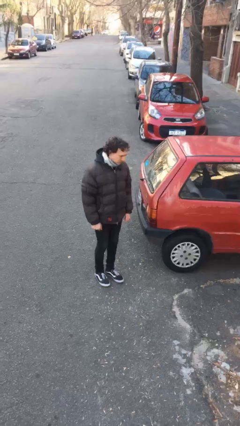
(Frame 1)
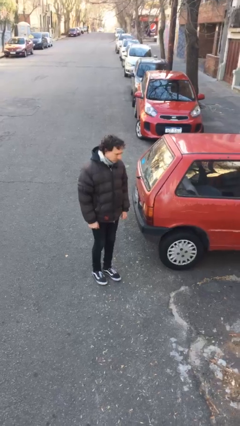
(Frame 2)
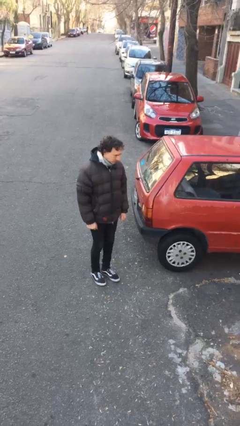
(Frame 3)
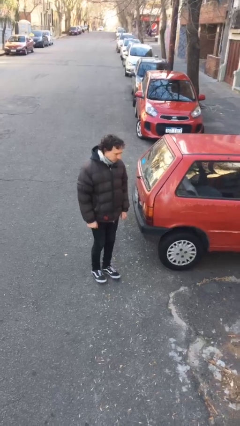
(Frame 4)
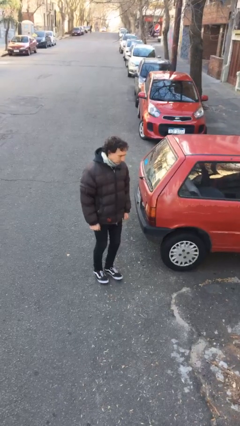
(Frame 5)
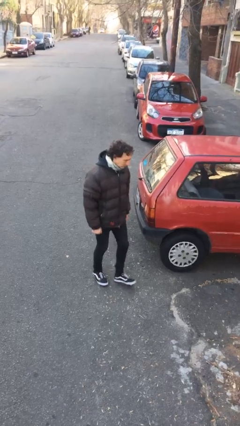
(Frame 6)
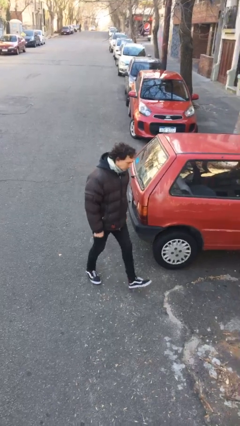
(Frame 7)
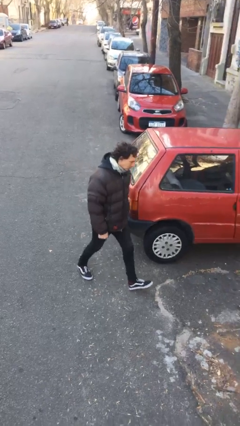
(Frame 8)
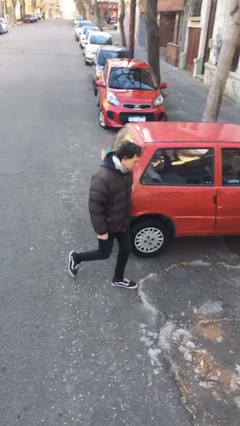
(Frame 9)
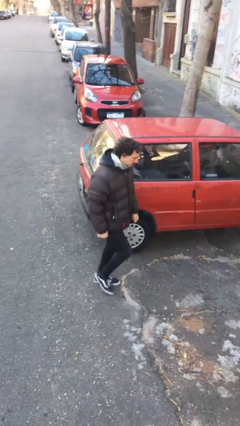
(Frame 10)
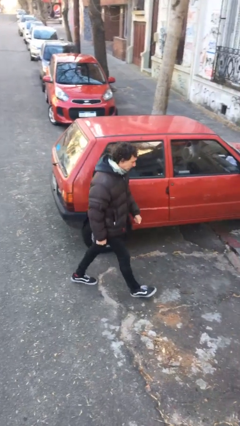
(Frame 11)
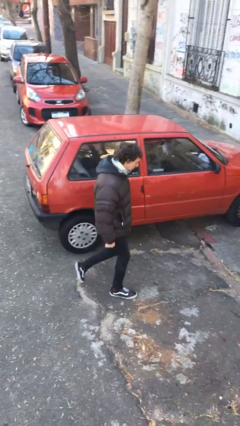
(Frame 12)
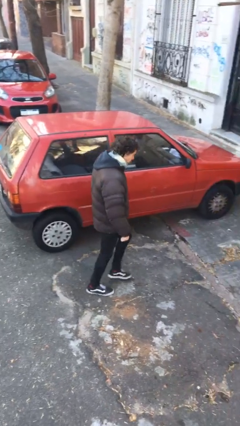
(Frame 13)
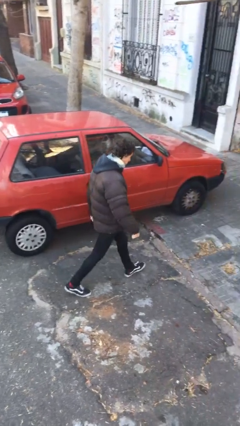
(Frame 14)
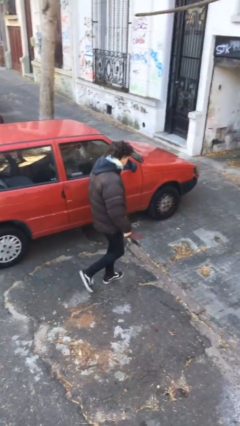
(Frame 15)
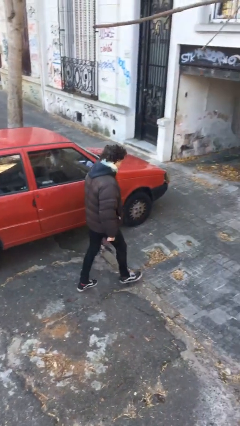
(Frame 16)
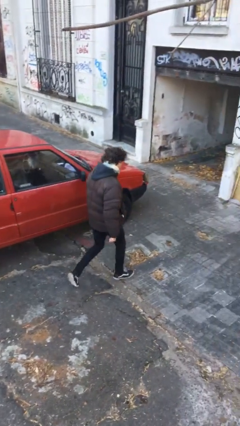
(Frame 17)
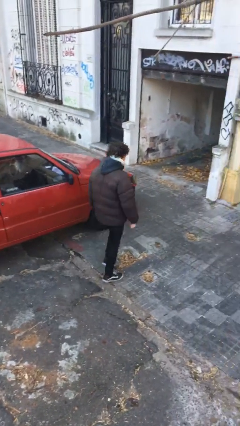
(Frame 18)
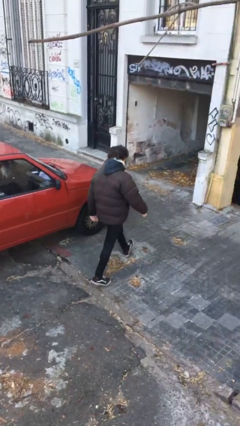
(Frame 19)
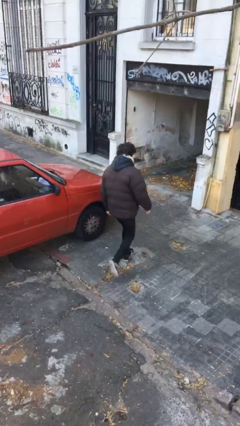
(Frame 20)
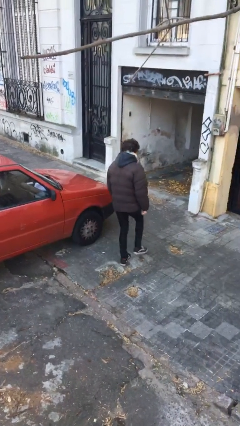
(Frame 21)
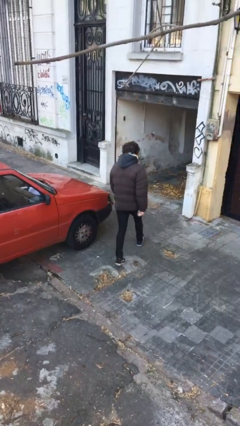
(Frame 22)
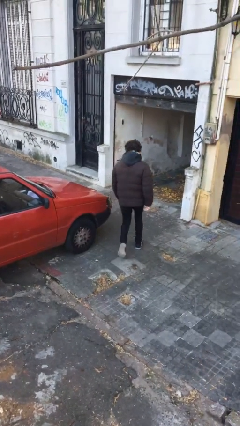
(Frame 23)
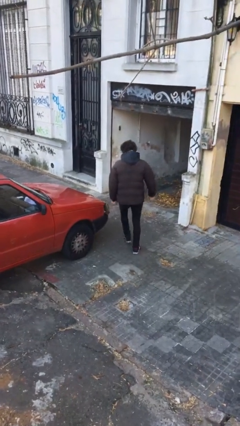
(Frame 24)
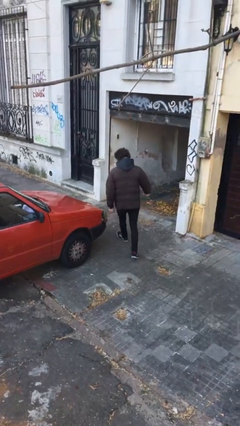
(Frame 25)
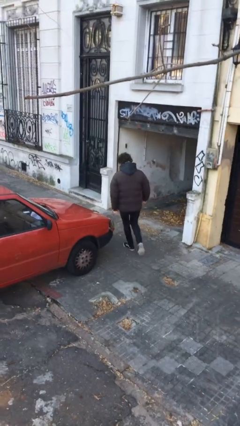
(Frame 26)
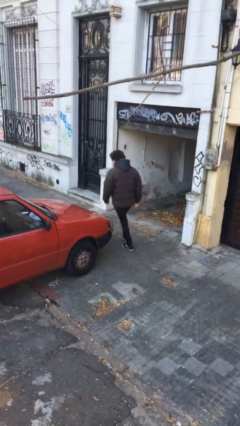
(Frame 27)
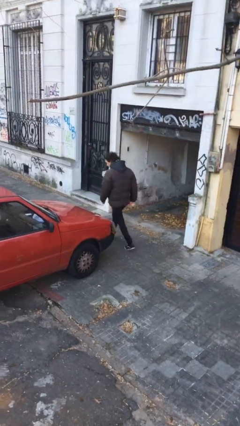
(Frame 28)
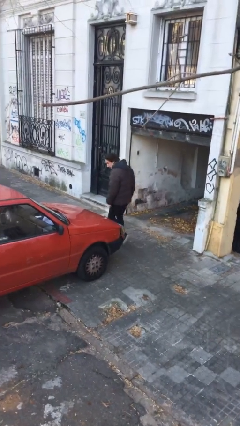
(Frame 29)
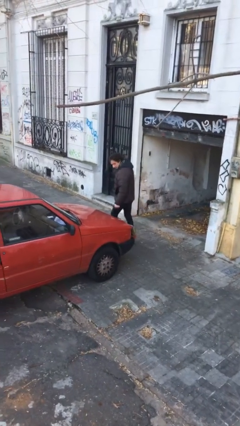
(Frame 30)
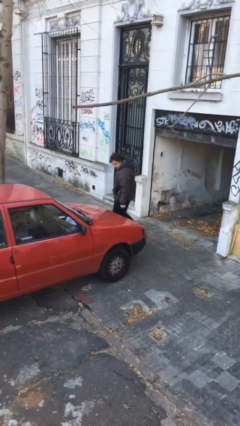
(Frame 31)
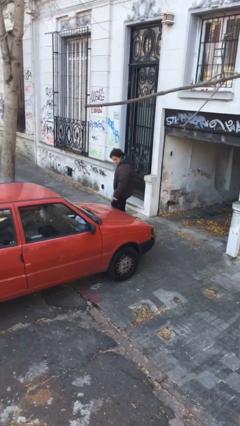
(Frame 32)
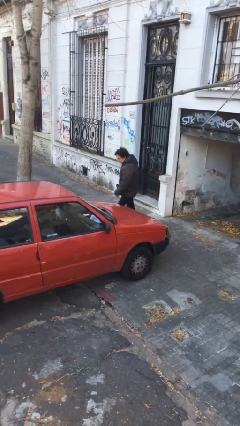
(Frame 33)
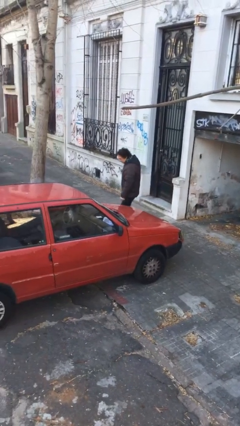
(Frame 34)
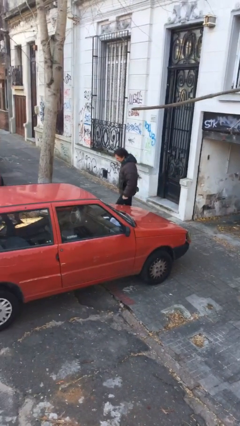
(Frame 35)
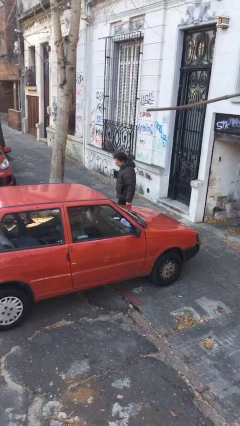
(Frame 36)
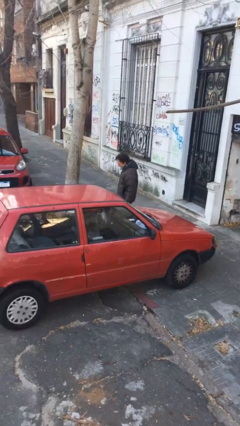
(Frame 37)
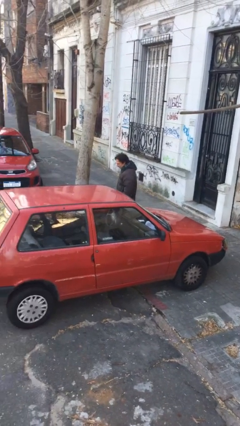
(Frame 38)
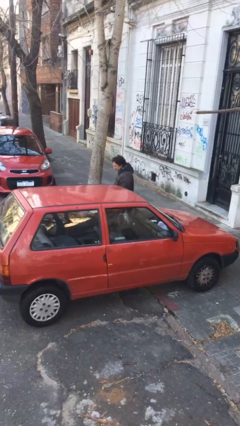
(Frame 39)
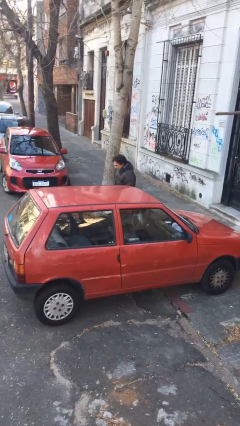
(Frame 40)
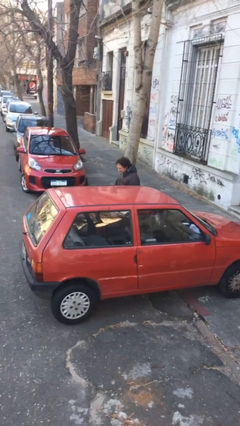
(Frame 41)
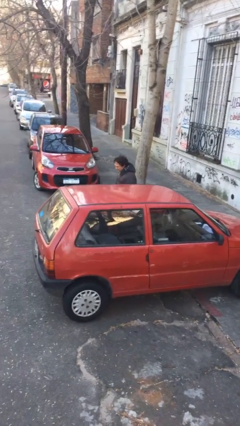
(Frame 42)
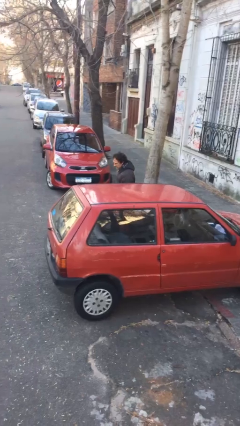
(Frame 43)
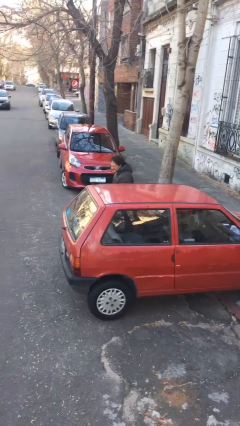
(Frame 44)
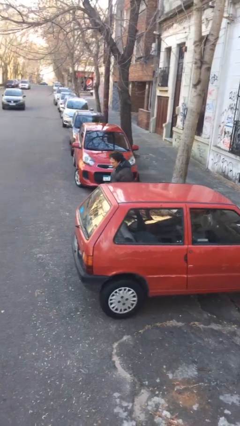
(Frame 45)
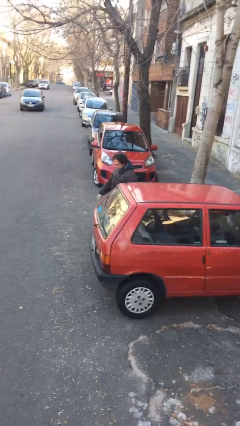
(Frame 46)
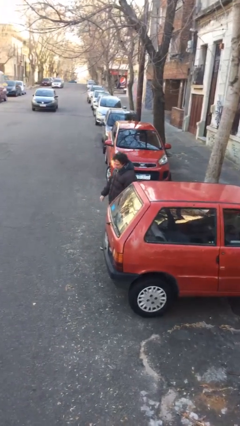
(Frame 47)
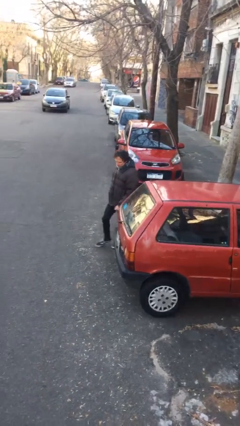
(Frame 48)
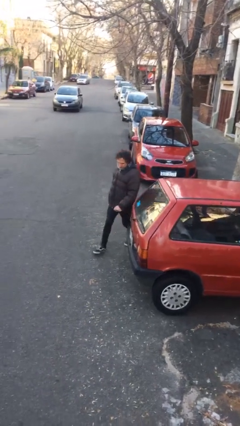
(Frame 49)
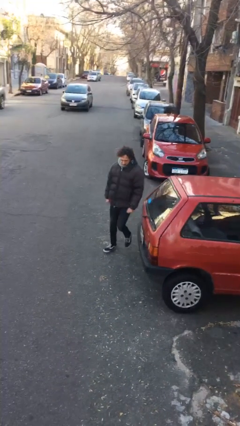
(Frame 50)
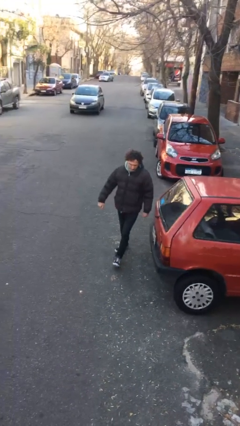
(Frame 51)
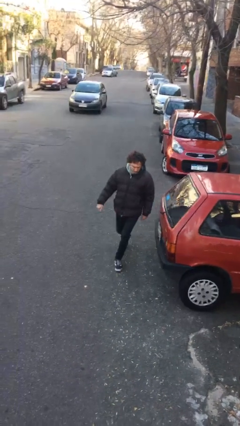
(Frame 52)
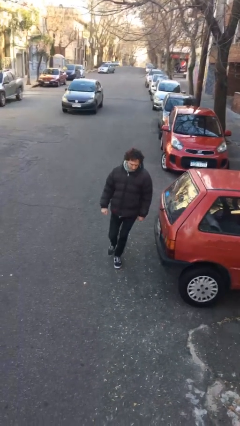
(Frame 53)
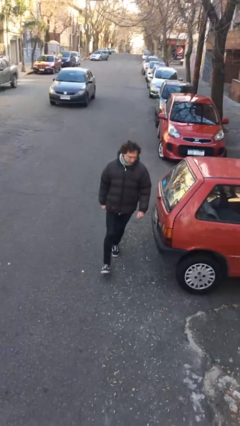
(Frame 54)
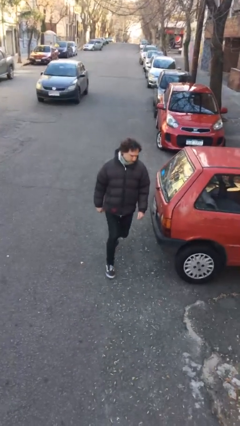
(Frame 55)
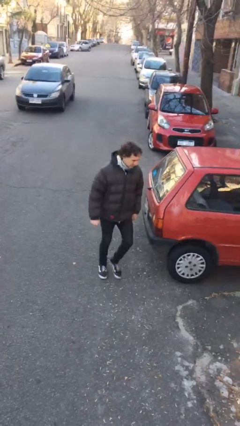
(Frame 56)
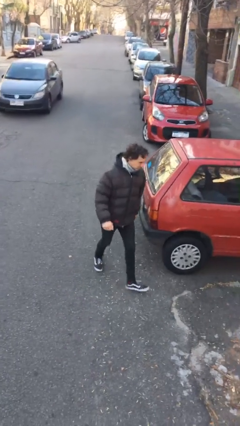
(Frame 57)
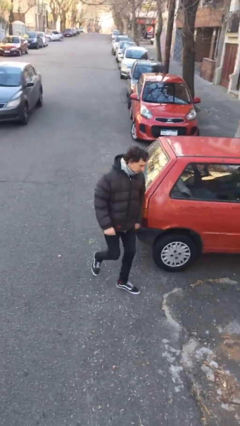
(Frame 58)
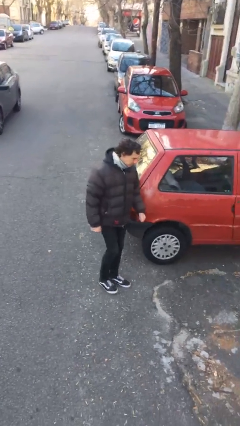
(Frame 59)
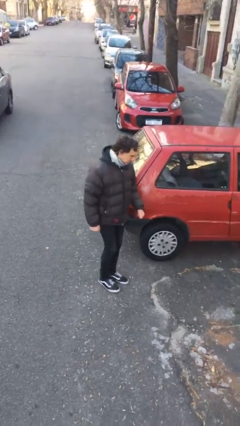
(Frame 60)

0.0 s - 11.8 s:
person walks around car

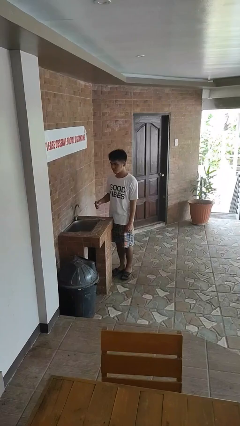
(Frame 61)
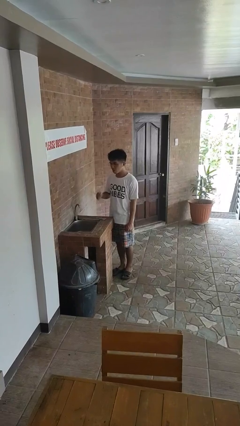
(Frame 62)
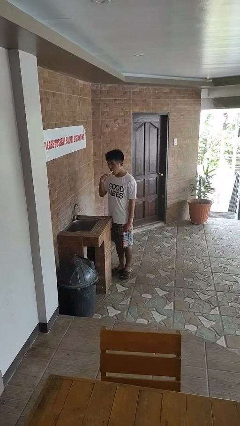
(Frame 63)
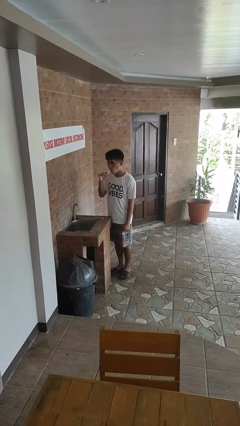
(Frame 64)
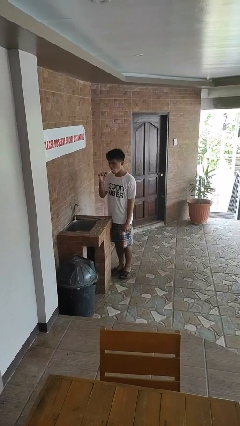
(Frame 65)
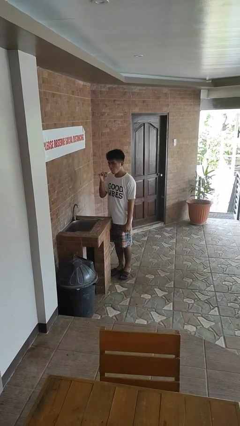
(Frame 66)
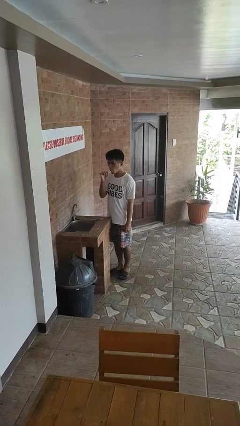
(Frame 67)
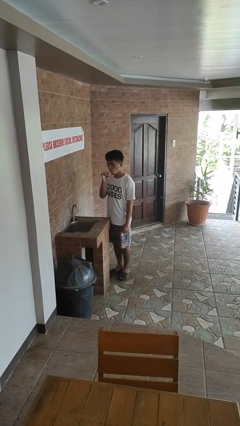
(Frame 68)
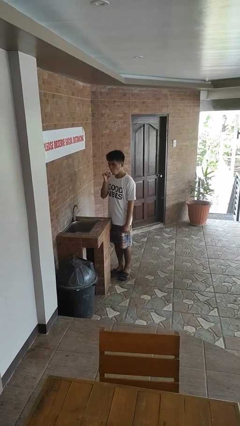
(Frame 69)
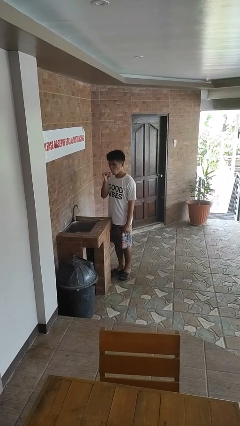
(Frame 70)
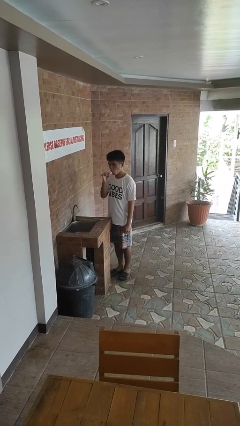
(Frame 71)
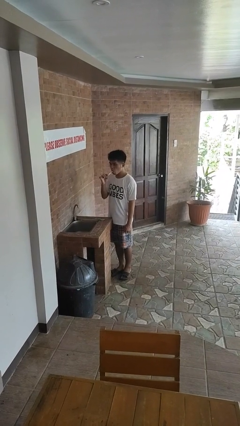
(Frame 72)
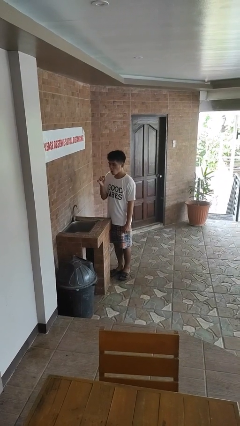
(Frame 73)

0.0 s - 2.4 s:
person brushes teeth

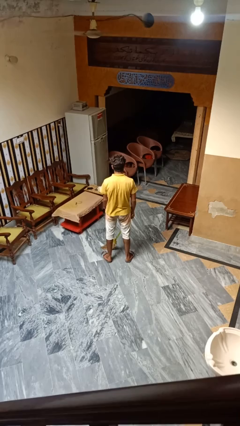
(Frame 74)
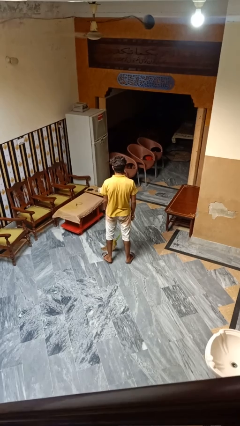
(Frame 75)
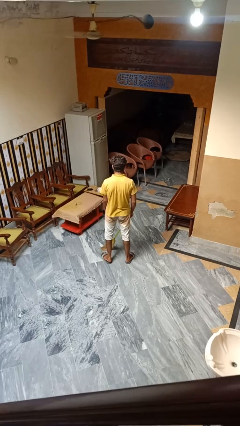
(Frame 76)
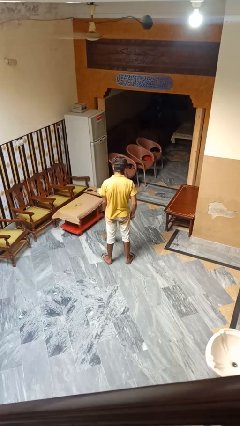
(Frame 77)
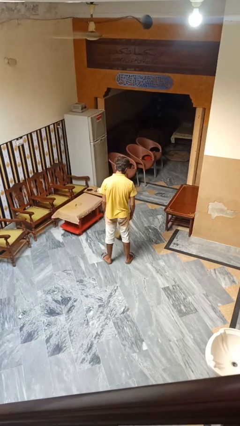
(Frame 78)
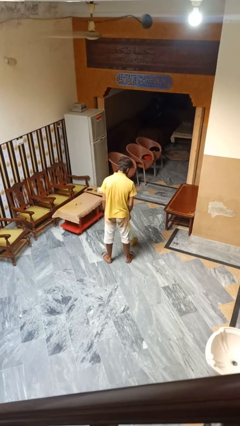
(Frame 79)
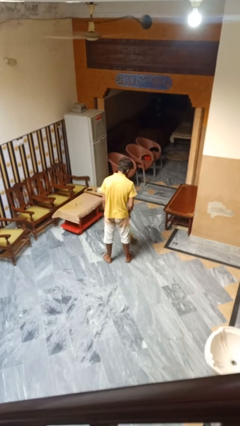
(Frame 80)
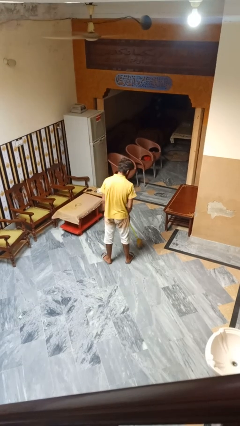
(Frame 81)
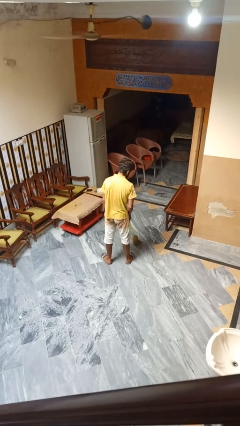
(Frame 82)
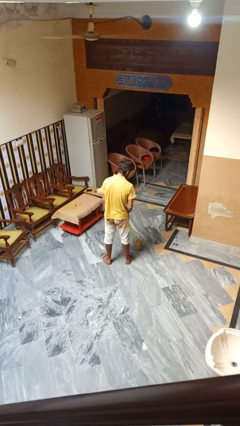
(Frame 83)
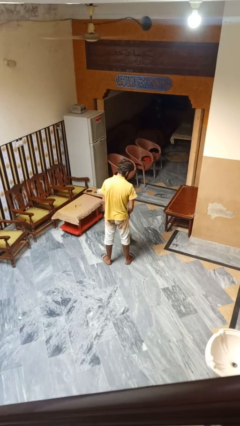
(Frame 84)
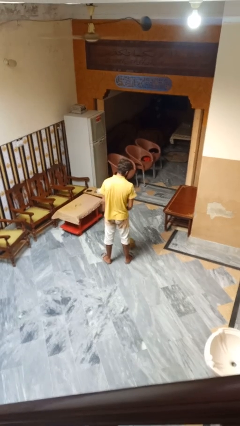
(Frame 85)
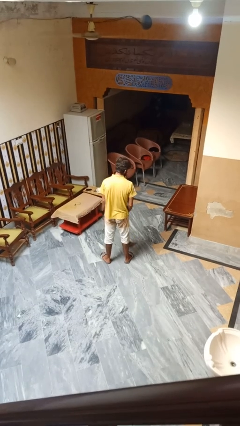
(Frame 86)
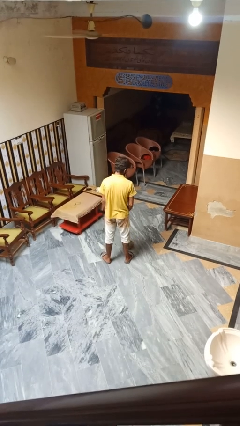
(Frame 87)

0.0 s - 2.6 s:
person mops

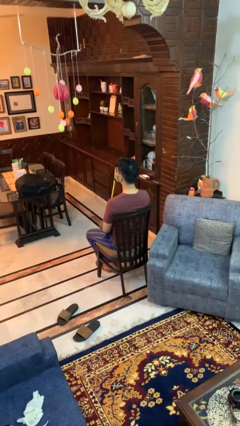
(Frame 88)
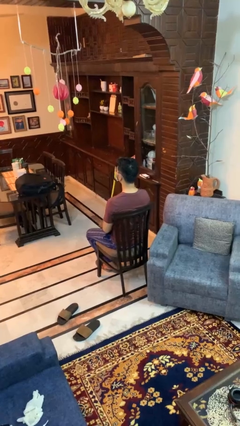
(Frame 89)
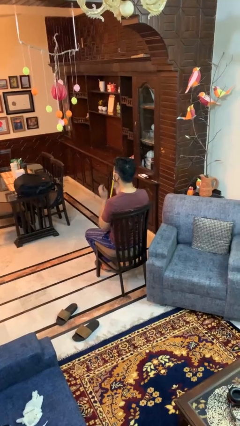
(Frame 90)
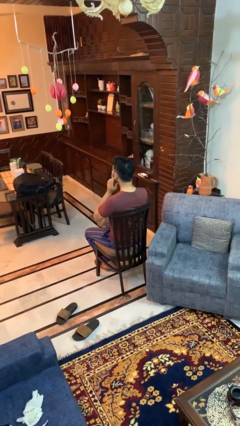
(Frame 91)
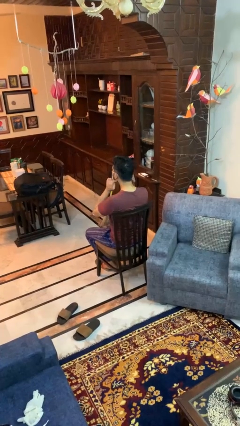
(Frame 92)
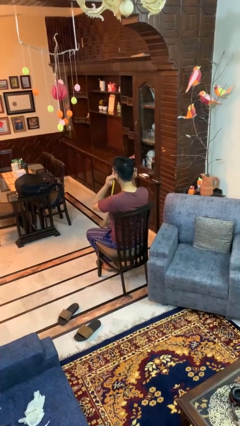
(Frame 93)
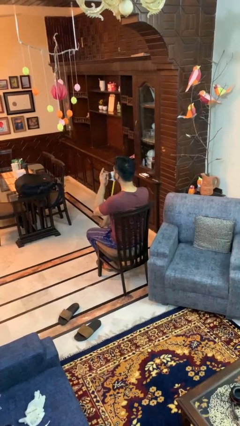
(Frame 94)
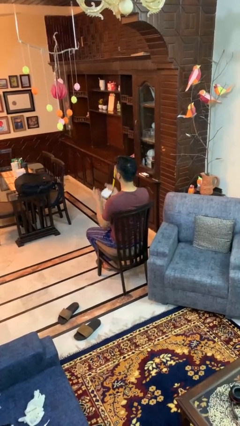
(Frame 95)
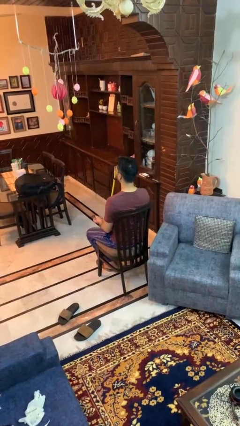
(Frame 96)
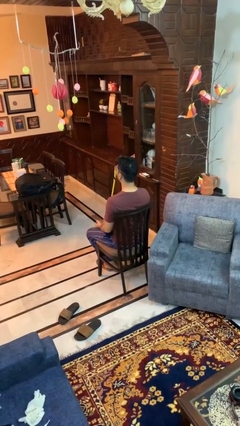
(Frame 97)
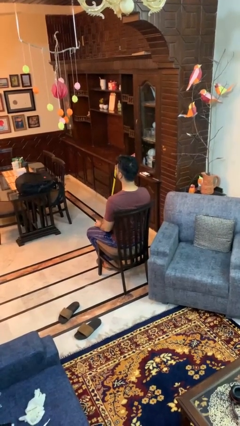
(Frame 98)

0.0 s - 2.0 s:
person takes off facemask
